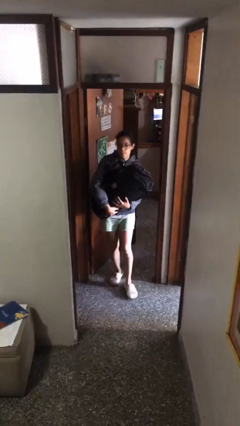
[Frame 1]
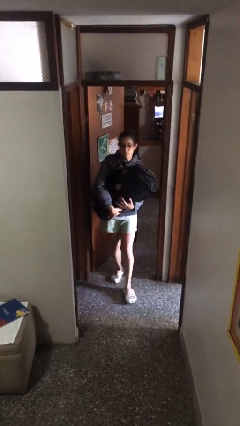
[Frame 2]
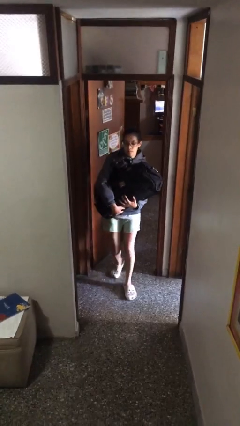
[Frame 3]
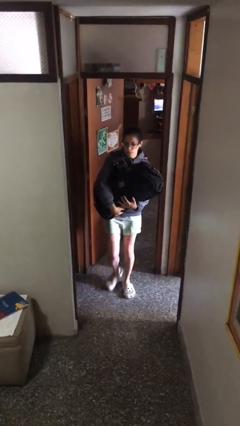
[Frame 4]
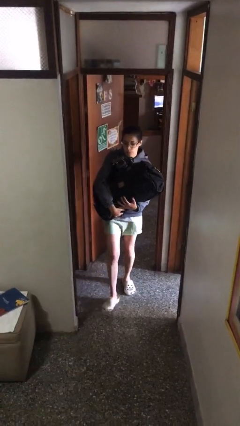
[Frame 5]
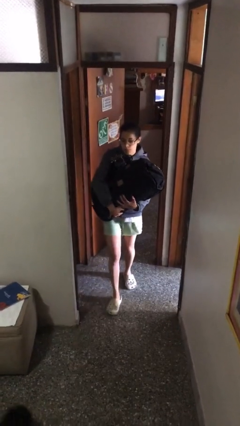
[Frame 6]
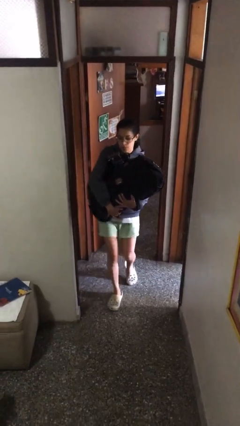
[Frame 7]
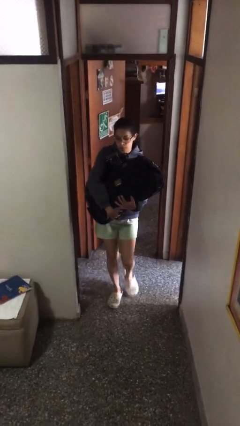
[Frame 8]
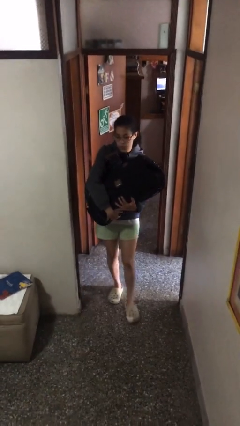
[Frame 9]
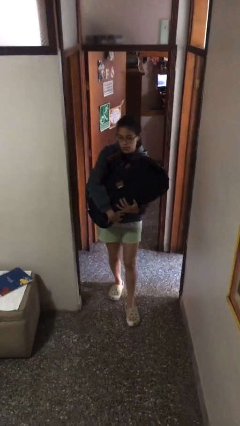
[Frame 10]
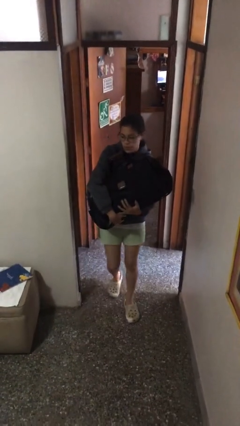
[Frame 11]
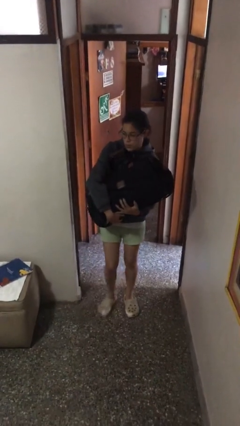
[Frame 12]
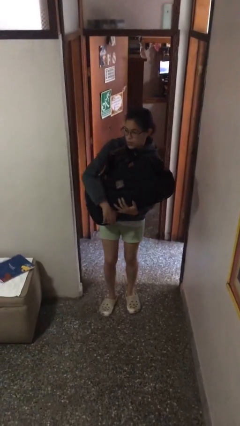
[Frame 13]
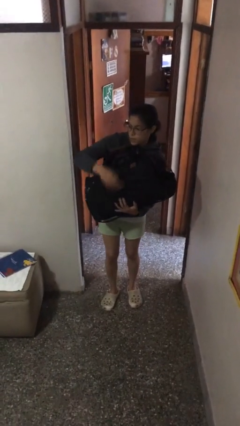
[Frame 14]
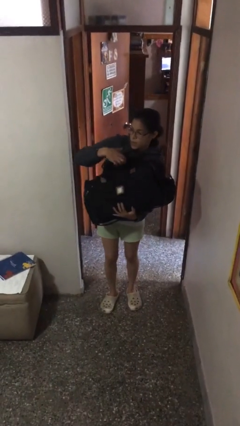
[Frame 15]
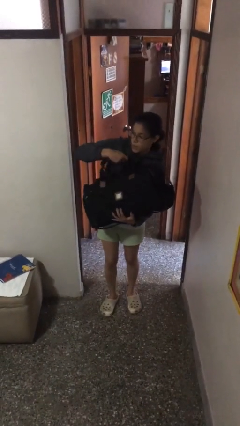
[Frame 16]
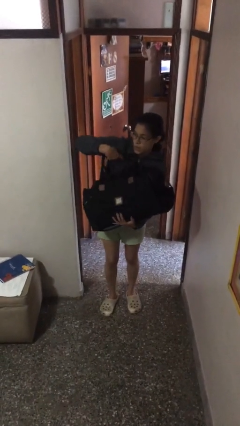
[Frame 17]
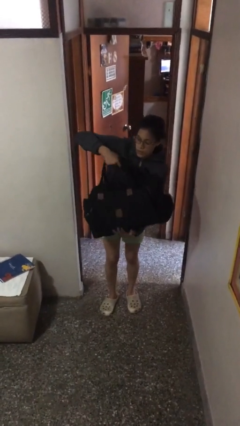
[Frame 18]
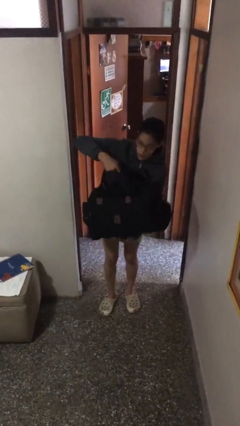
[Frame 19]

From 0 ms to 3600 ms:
person carries heavy object

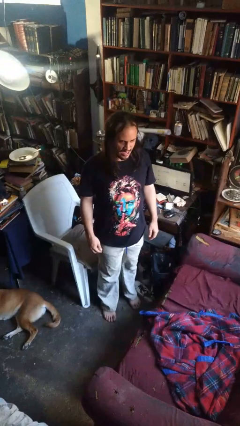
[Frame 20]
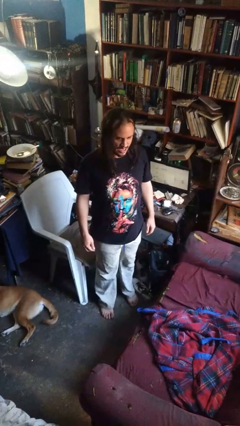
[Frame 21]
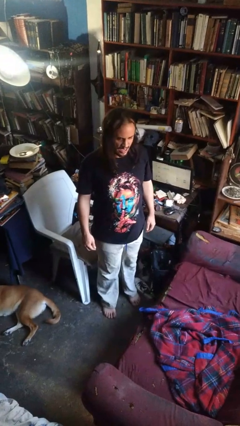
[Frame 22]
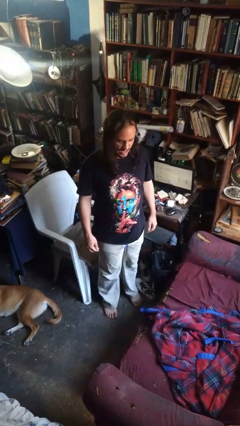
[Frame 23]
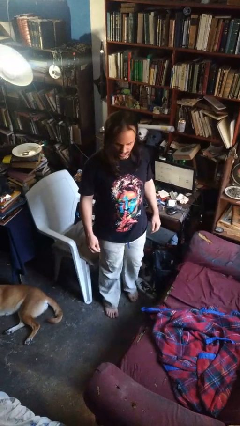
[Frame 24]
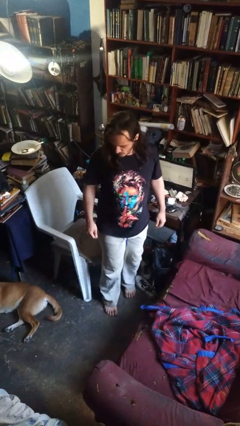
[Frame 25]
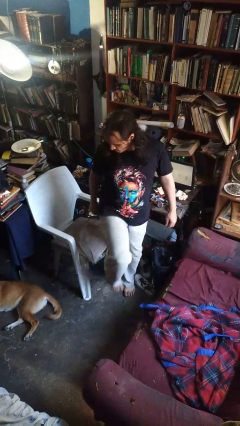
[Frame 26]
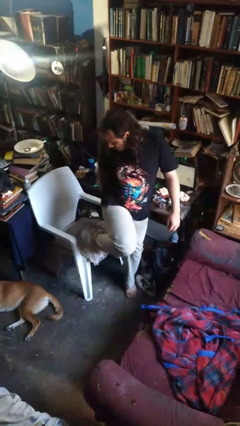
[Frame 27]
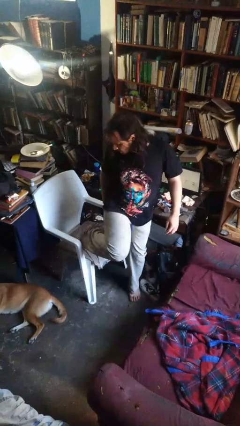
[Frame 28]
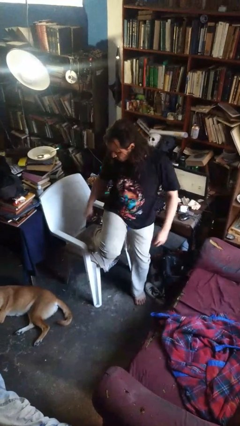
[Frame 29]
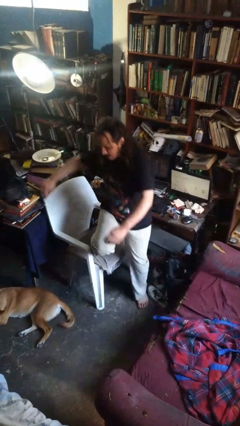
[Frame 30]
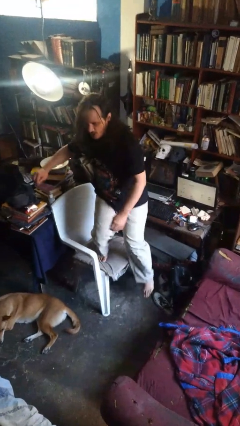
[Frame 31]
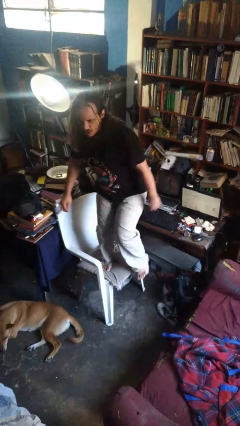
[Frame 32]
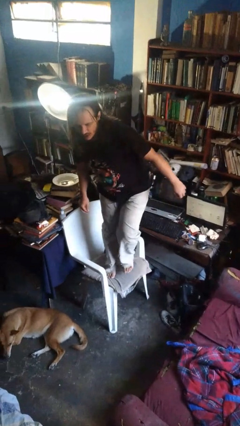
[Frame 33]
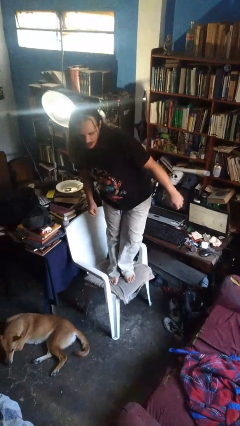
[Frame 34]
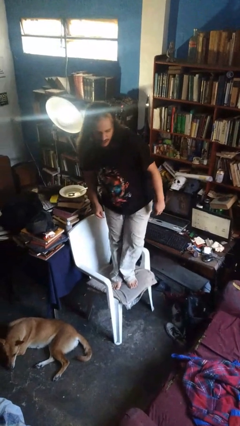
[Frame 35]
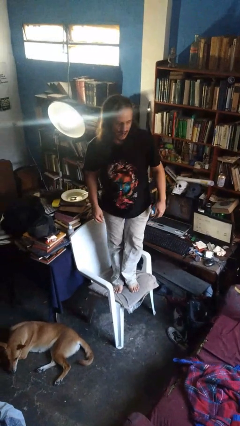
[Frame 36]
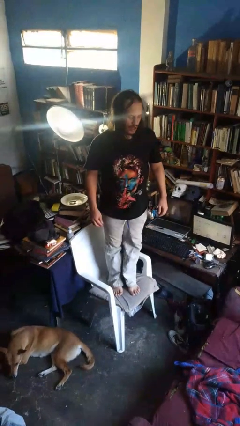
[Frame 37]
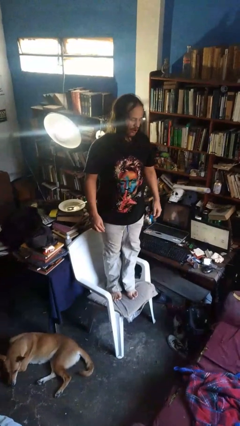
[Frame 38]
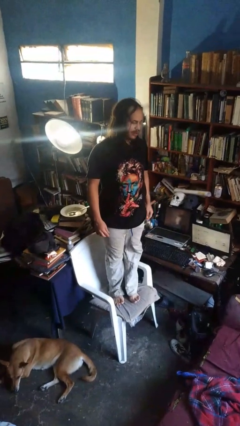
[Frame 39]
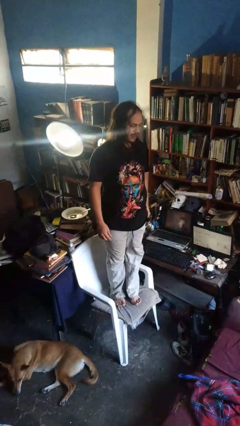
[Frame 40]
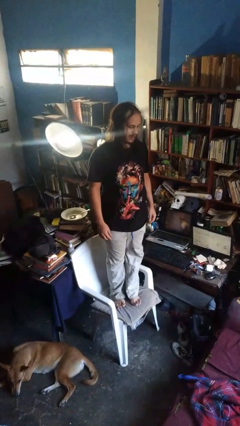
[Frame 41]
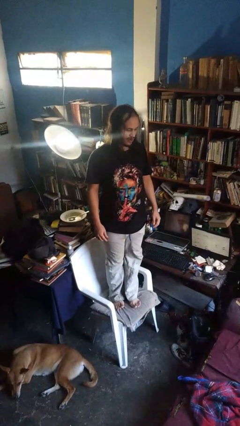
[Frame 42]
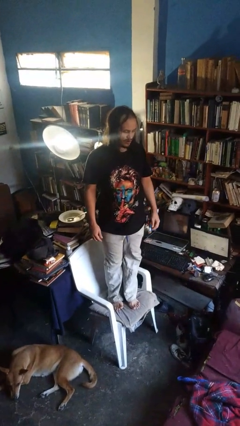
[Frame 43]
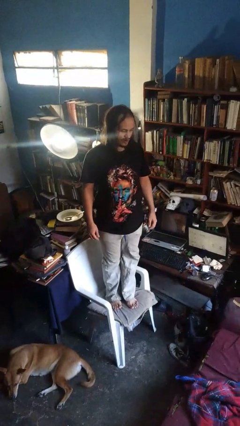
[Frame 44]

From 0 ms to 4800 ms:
person climbs on chair

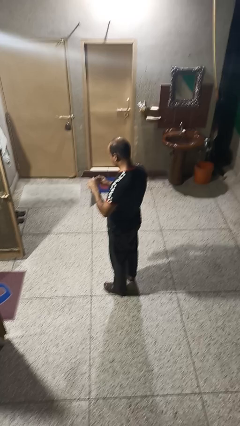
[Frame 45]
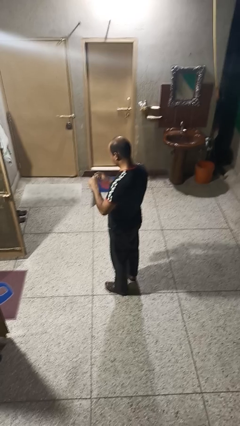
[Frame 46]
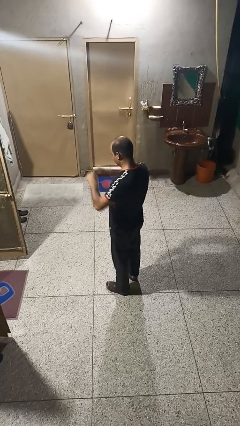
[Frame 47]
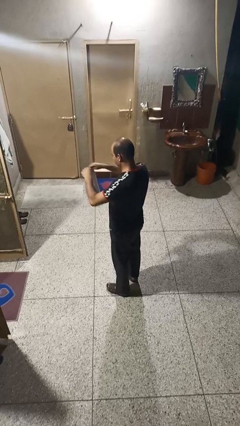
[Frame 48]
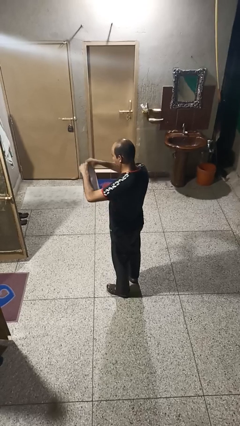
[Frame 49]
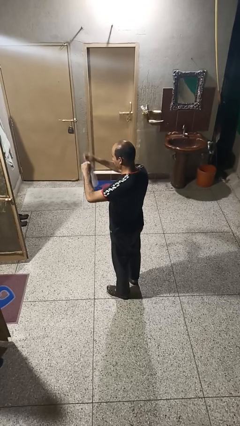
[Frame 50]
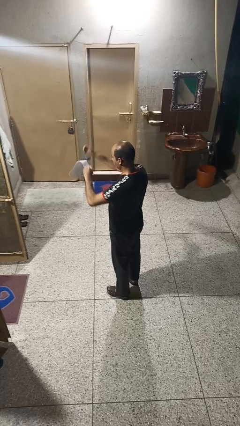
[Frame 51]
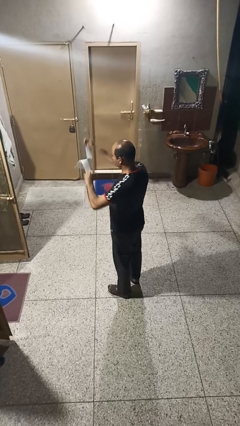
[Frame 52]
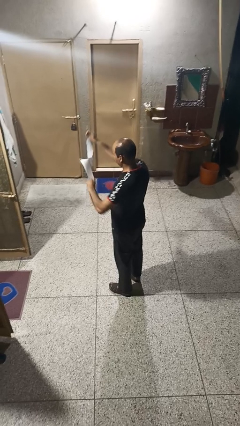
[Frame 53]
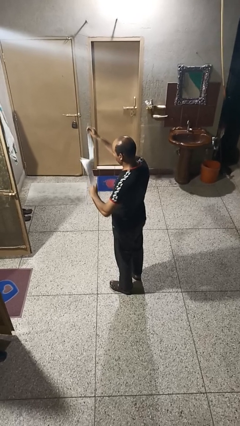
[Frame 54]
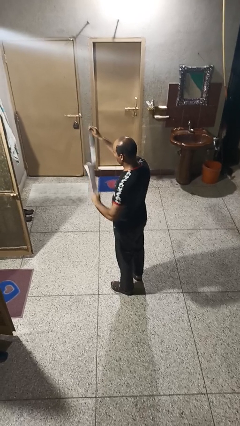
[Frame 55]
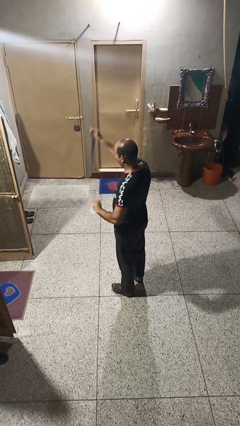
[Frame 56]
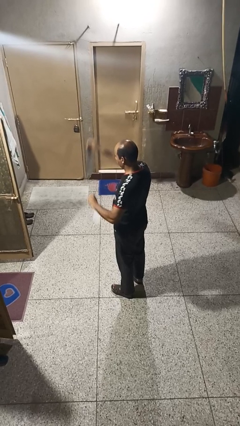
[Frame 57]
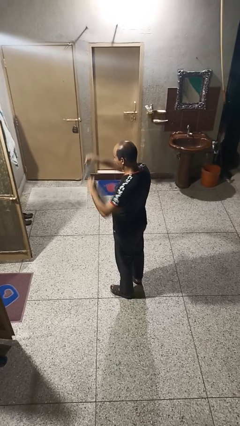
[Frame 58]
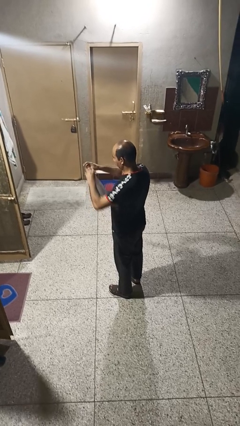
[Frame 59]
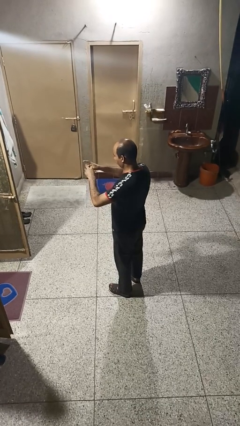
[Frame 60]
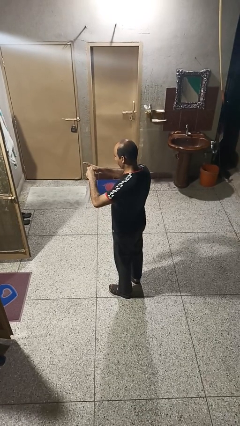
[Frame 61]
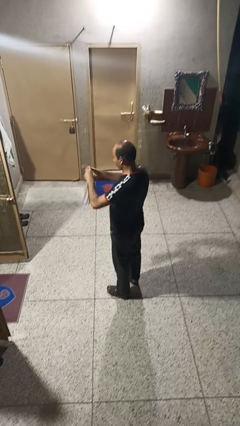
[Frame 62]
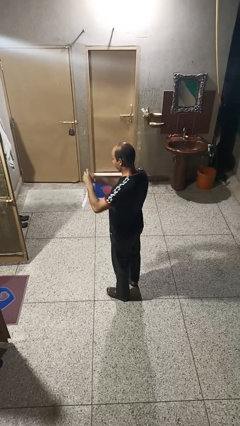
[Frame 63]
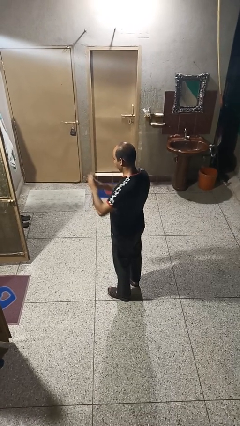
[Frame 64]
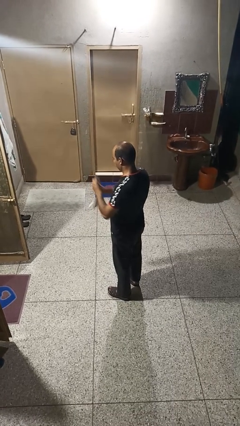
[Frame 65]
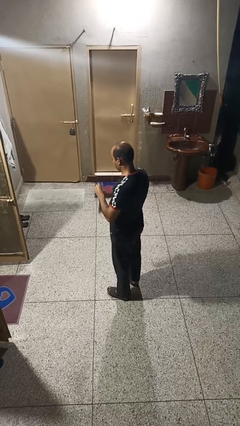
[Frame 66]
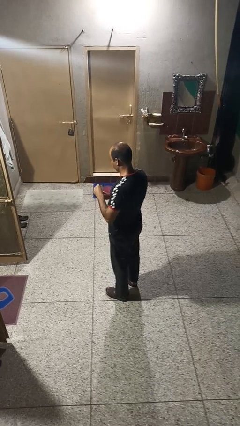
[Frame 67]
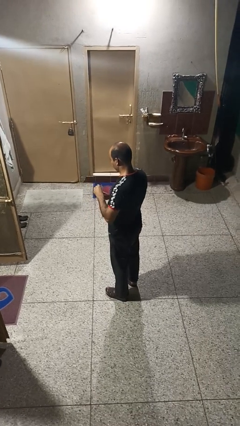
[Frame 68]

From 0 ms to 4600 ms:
person tears paper

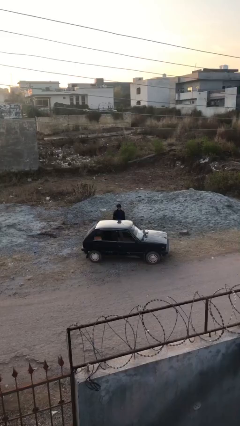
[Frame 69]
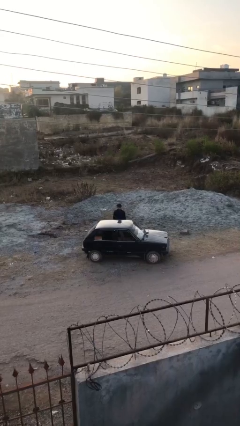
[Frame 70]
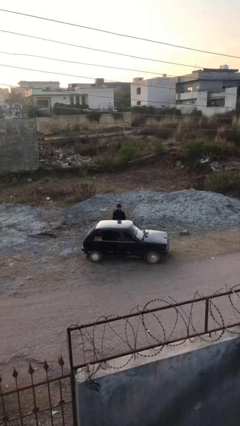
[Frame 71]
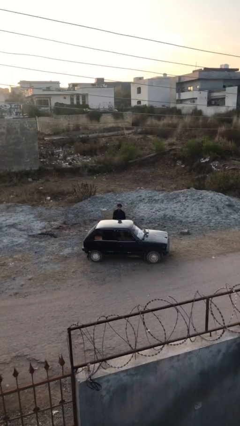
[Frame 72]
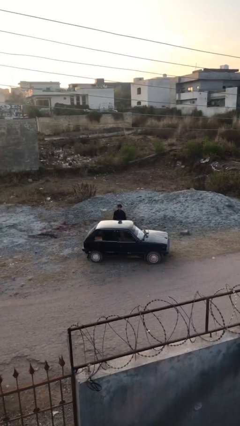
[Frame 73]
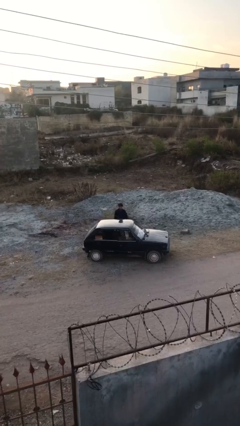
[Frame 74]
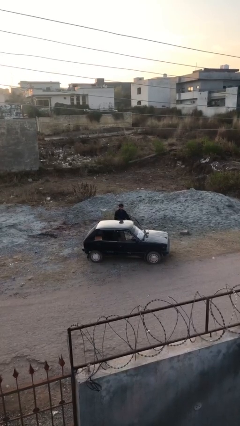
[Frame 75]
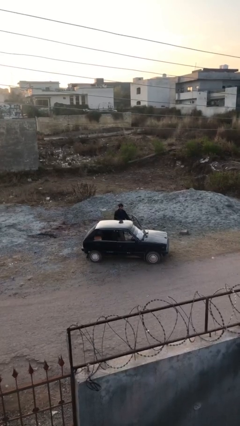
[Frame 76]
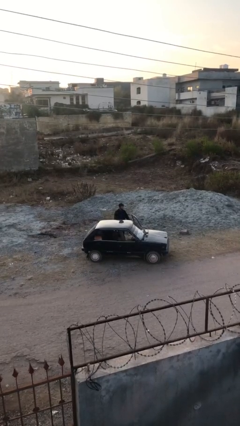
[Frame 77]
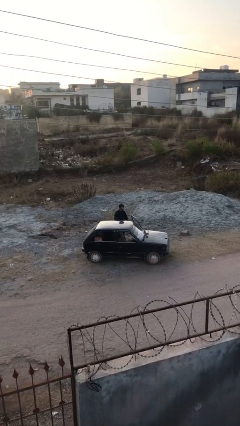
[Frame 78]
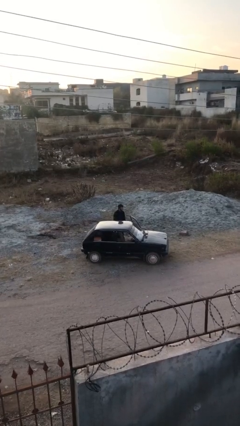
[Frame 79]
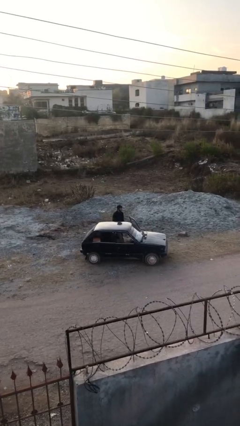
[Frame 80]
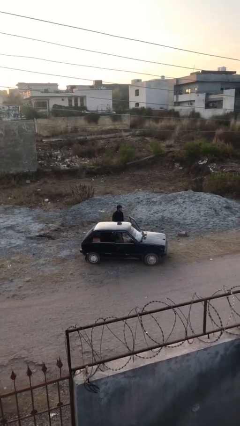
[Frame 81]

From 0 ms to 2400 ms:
person opens car door

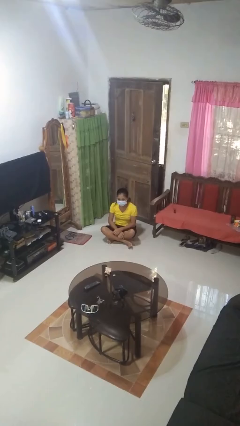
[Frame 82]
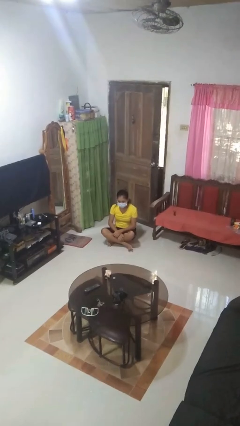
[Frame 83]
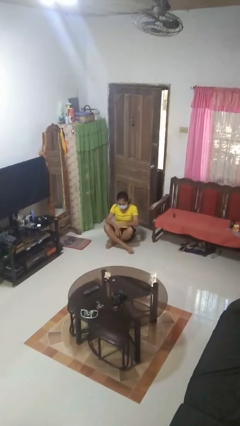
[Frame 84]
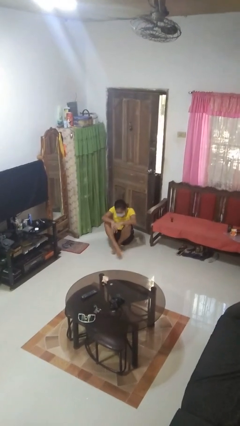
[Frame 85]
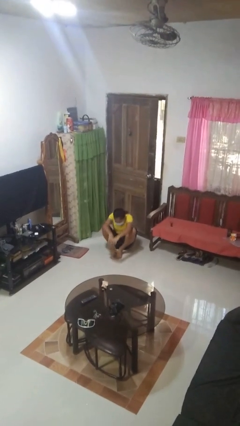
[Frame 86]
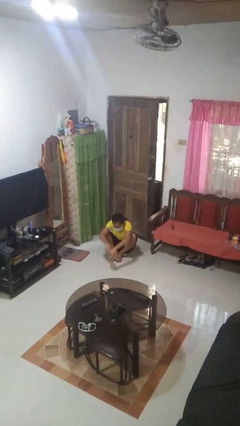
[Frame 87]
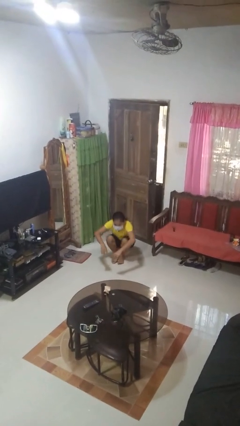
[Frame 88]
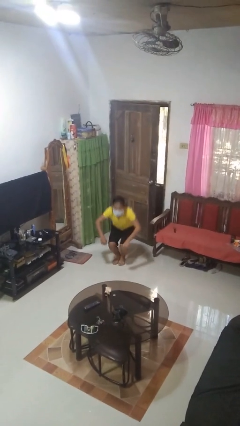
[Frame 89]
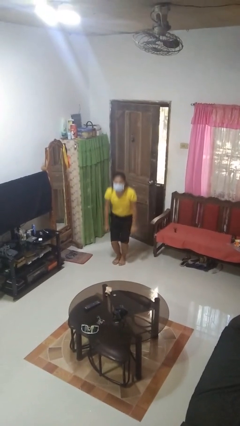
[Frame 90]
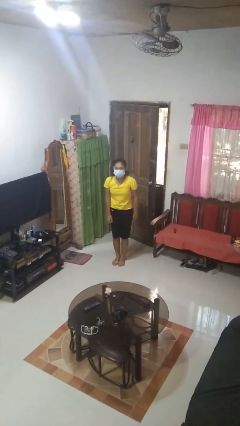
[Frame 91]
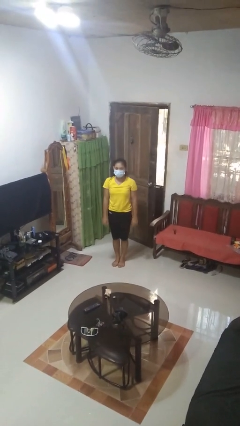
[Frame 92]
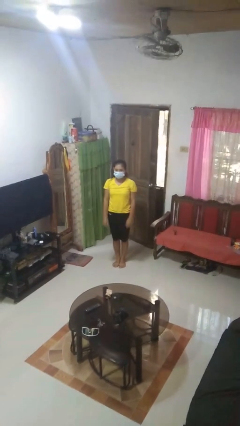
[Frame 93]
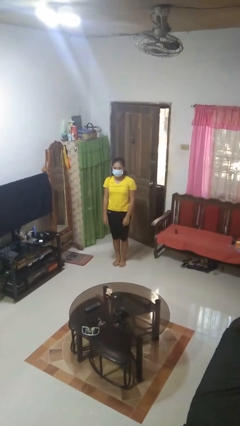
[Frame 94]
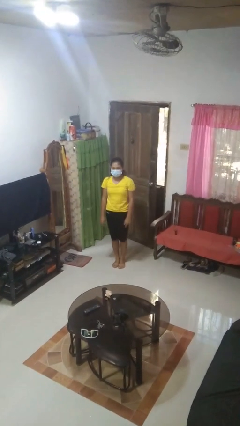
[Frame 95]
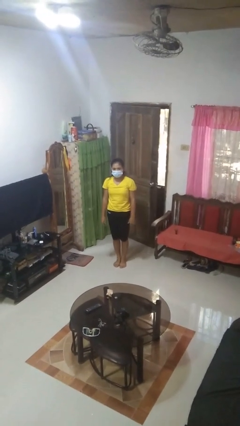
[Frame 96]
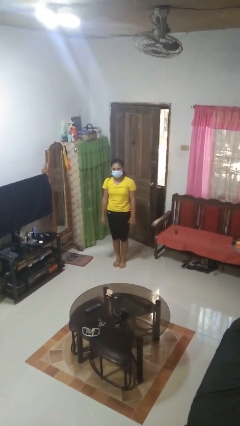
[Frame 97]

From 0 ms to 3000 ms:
person stands up from floor
